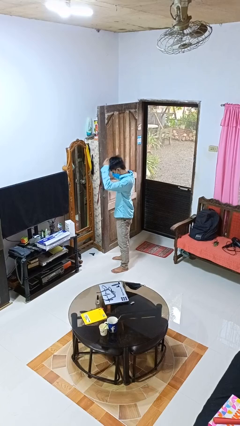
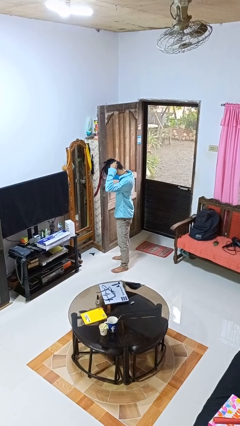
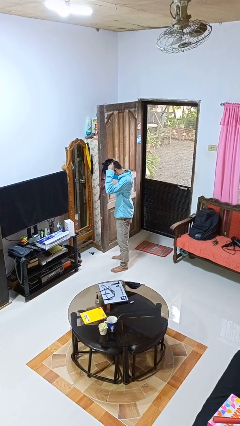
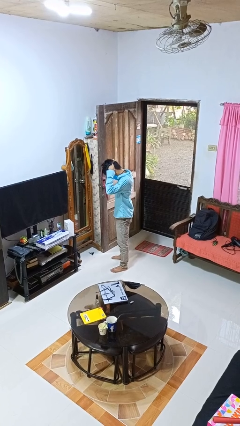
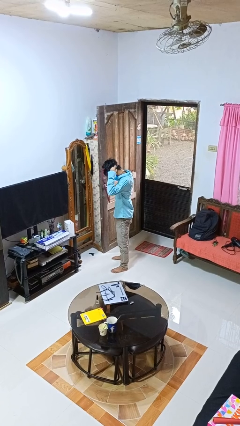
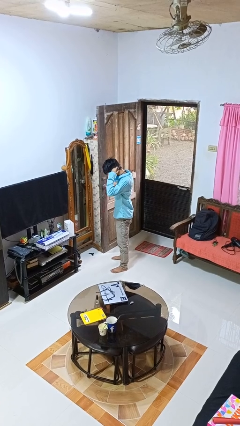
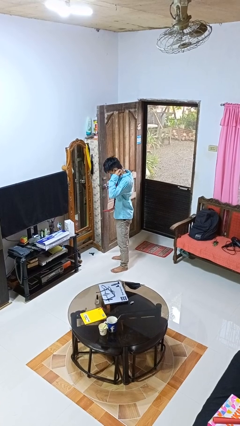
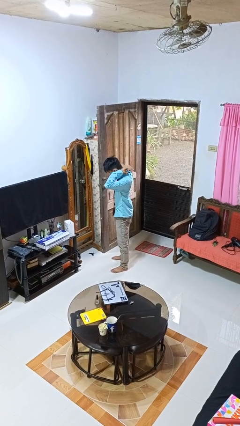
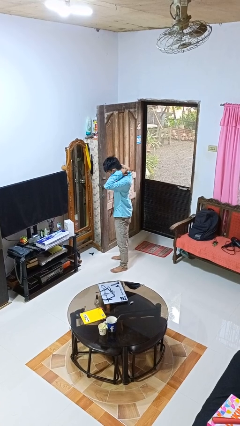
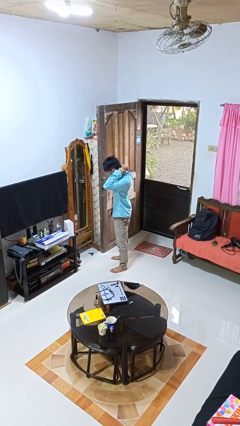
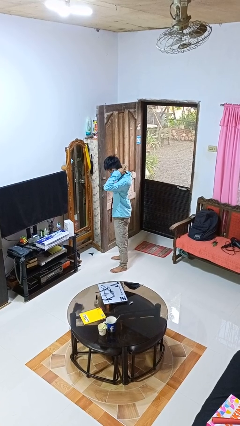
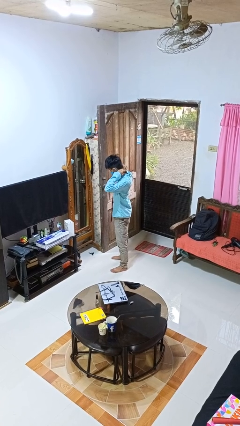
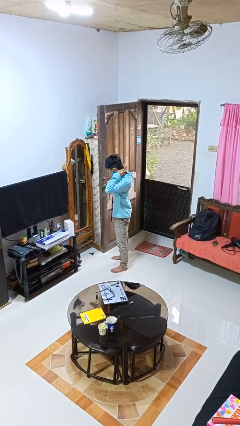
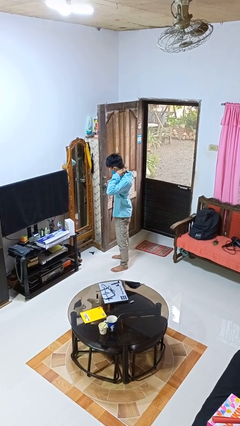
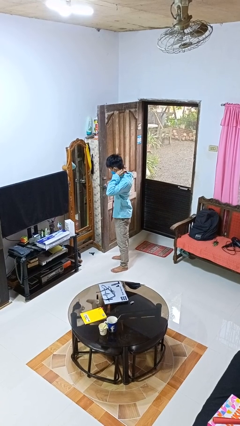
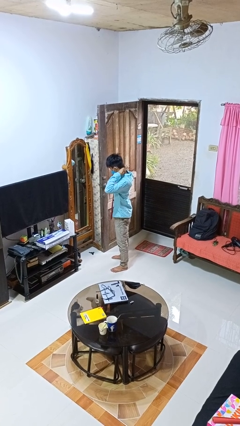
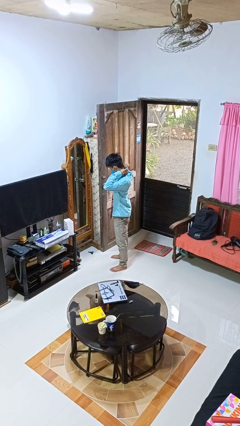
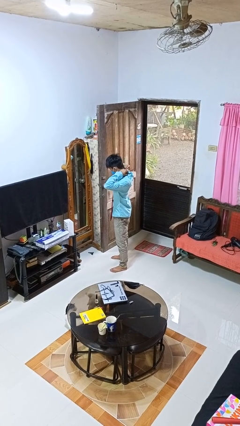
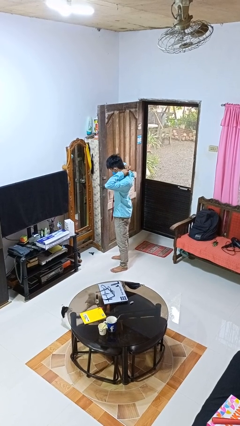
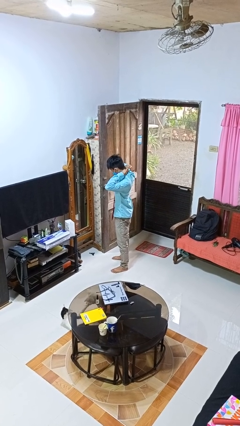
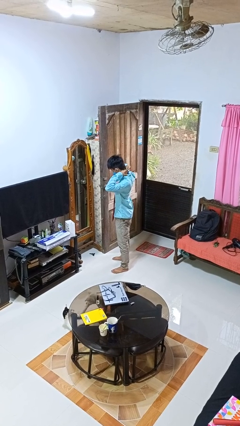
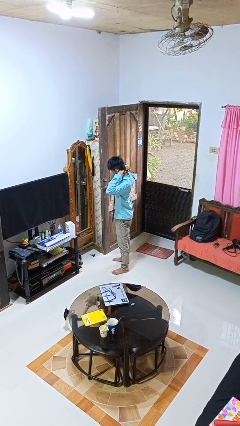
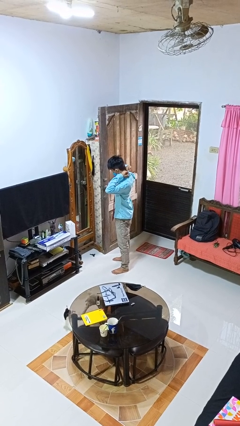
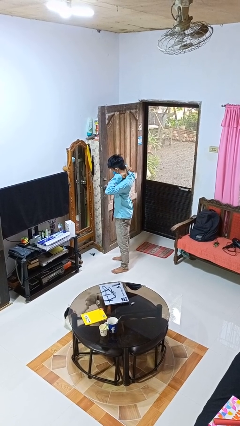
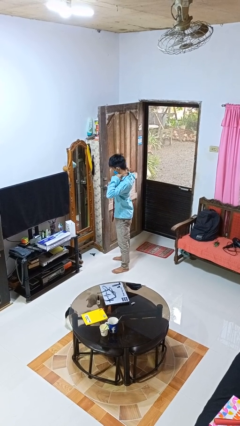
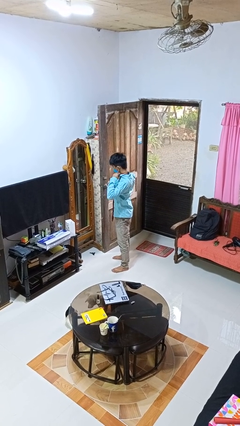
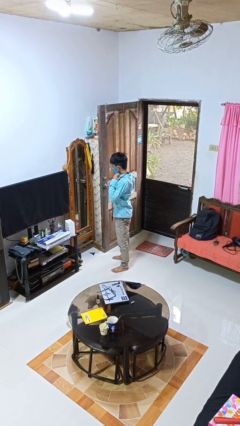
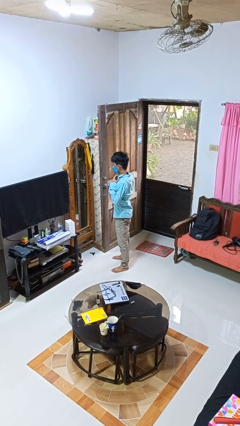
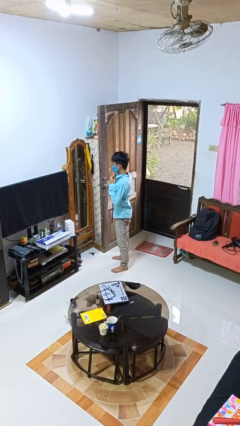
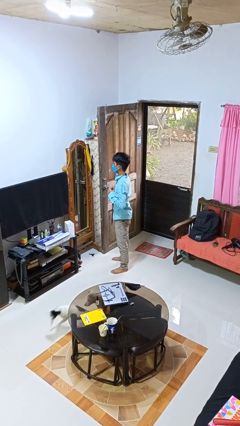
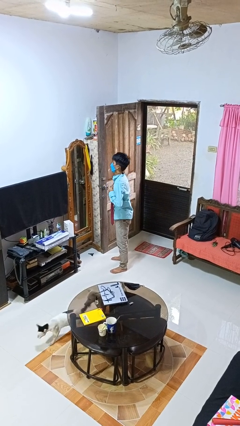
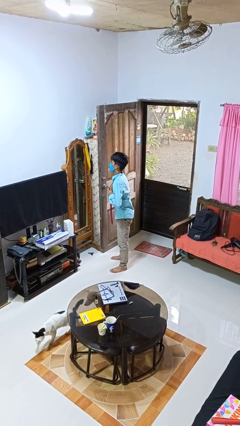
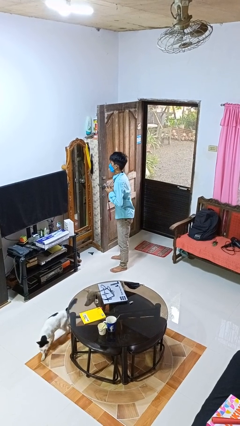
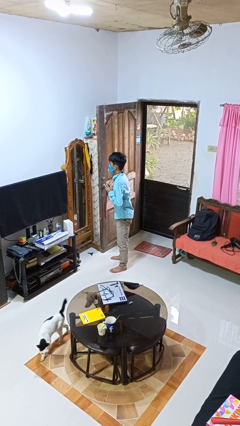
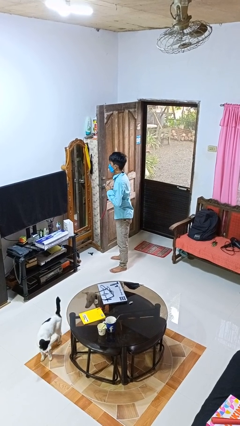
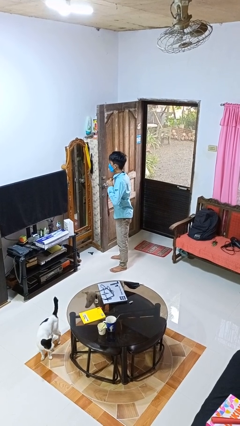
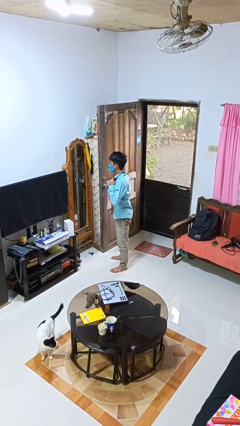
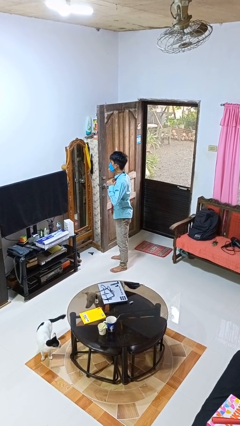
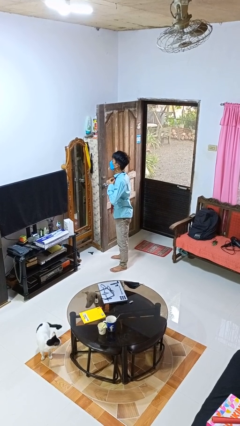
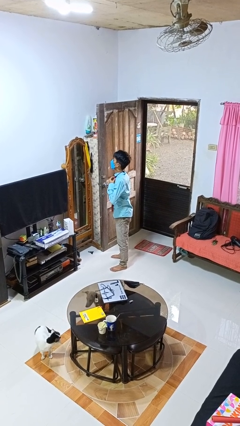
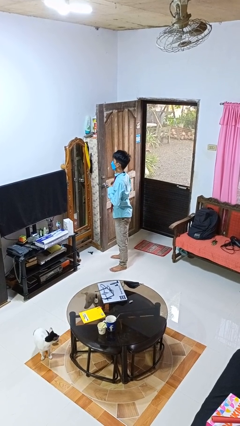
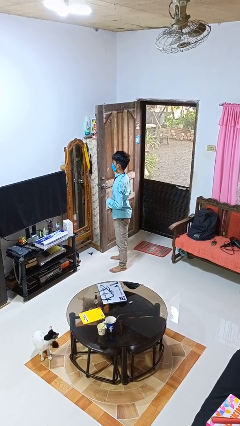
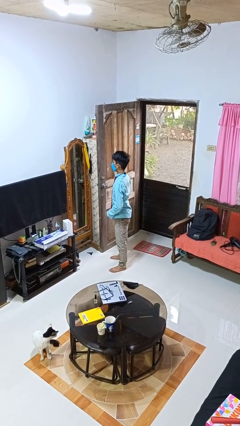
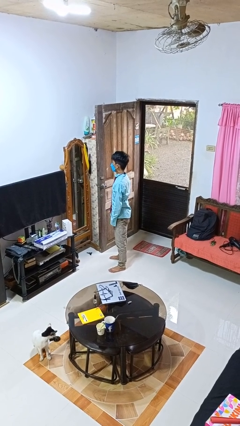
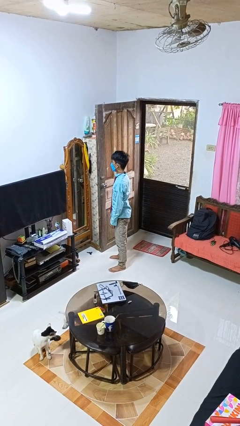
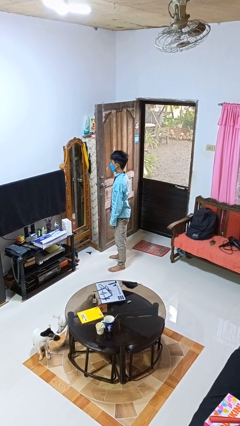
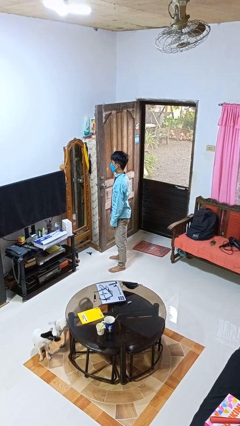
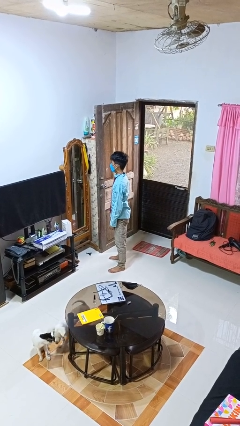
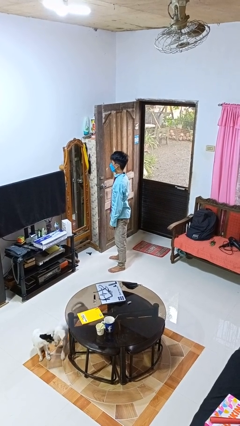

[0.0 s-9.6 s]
person puts on necktie

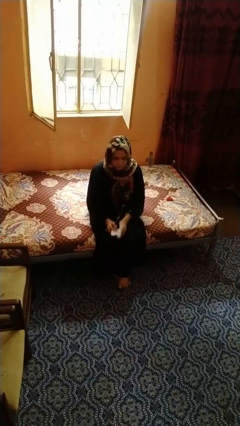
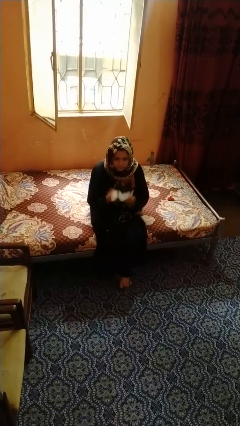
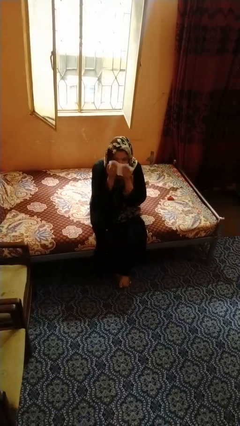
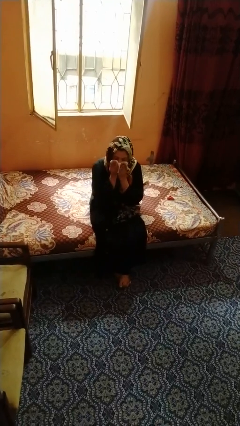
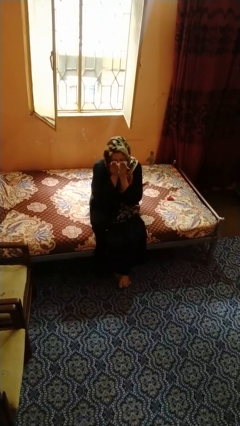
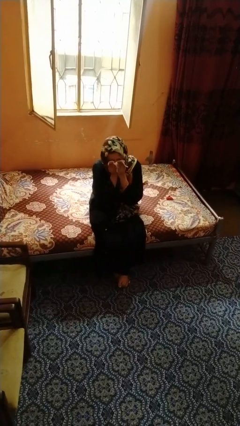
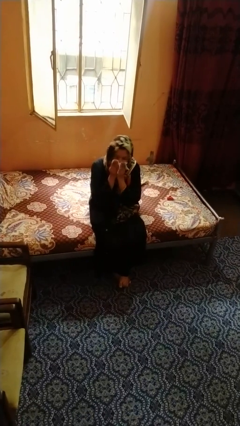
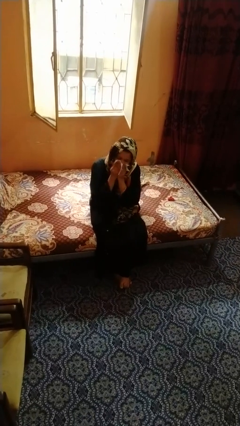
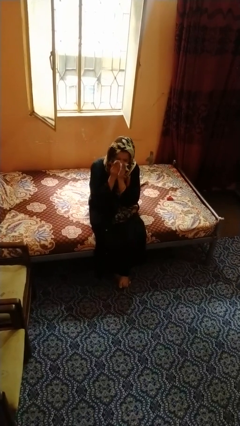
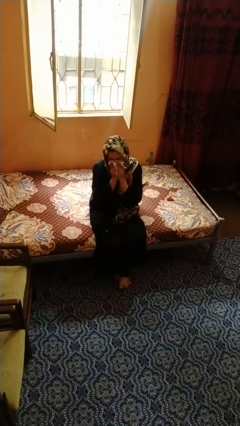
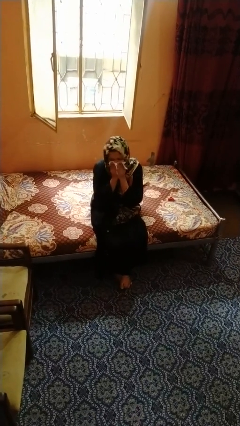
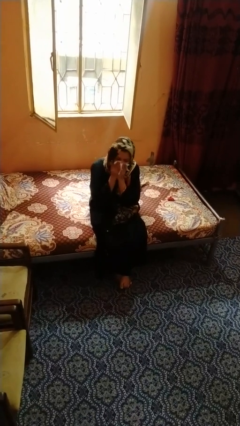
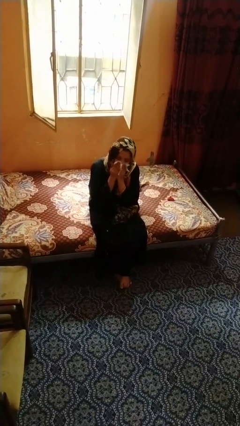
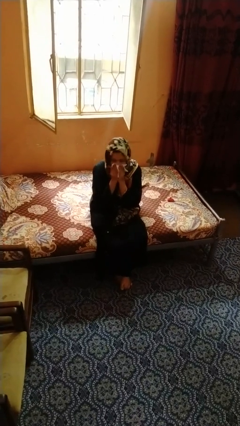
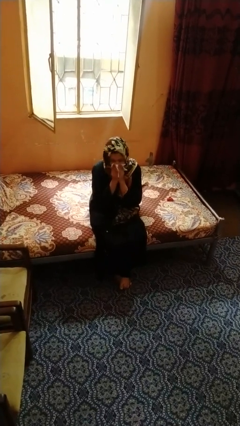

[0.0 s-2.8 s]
person blows nose

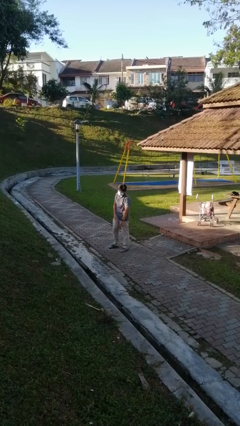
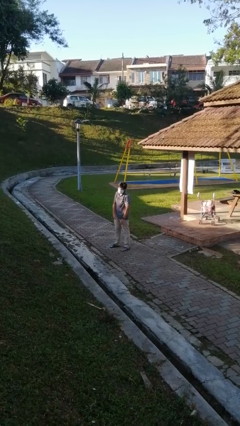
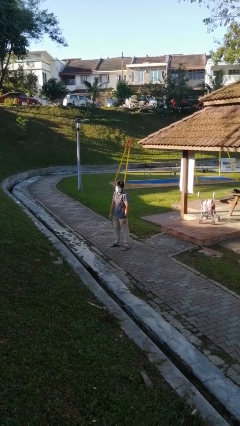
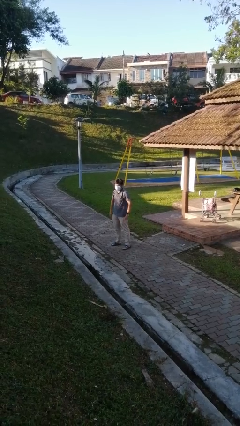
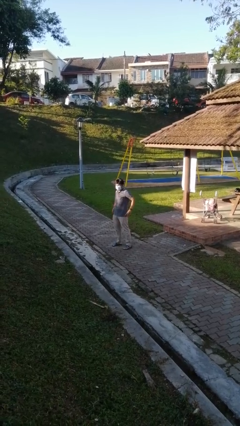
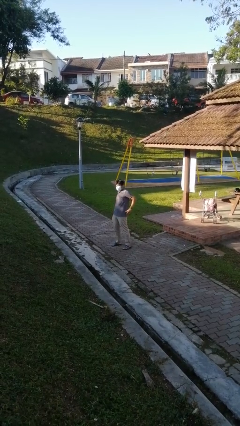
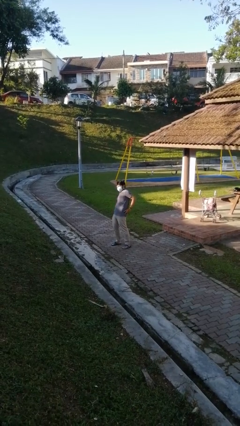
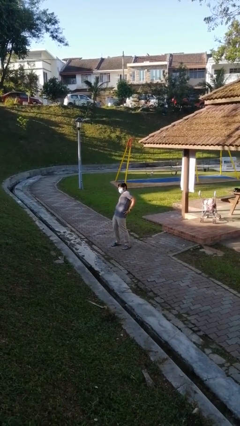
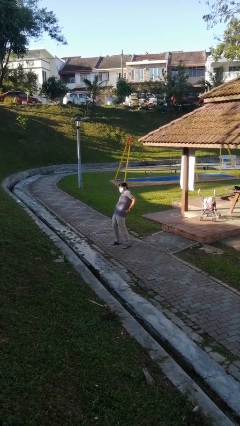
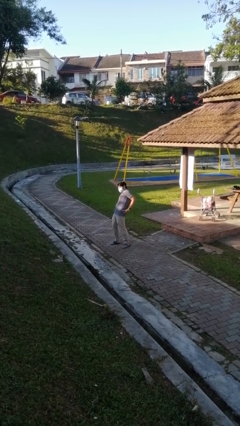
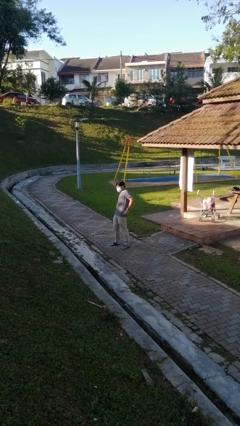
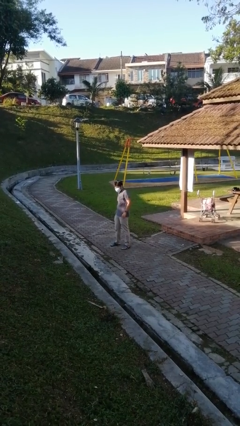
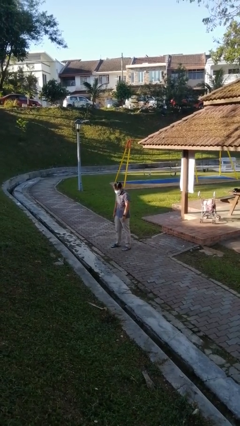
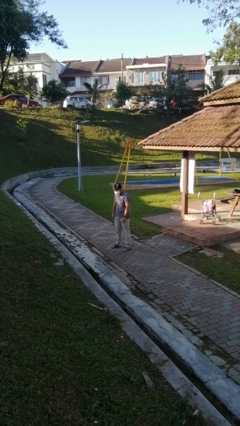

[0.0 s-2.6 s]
person stretches back

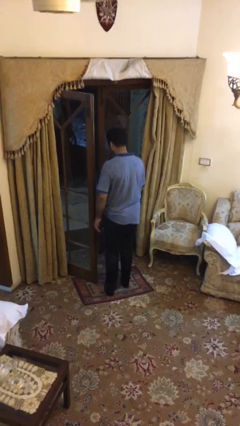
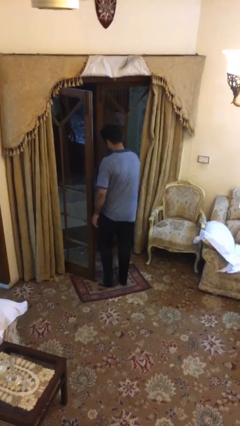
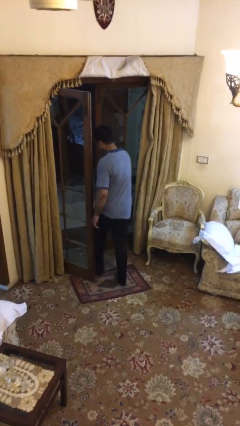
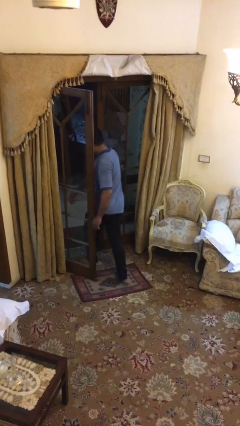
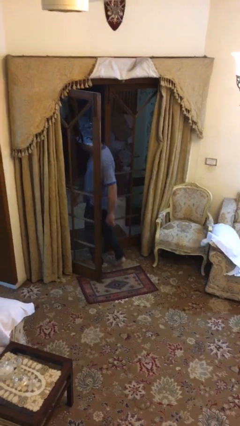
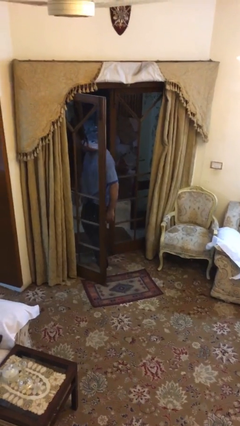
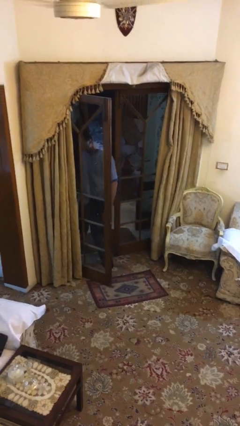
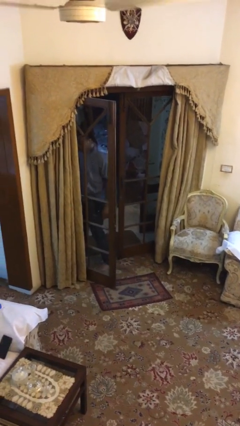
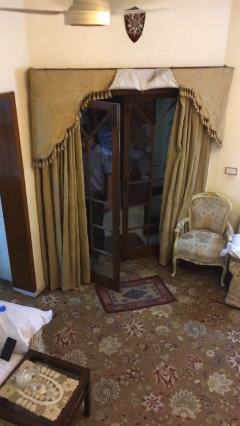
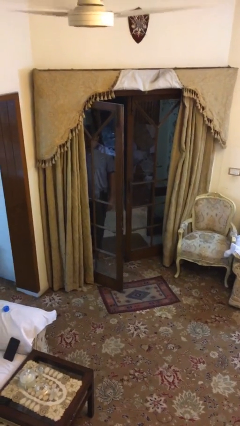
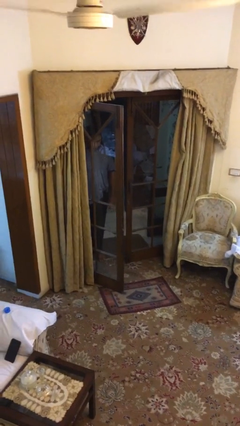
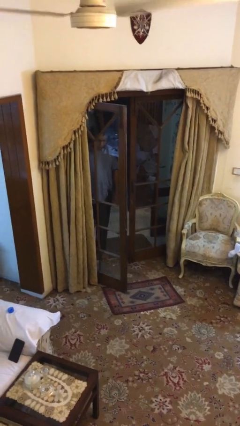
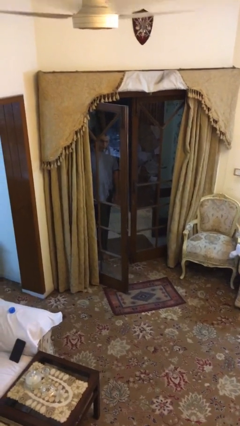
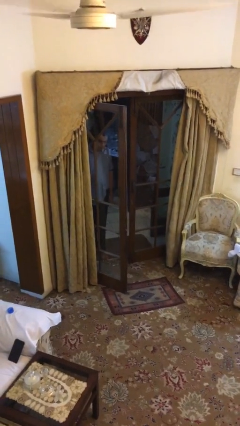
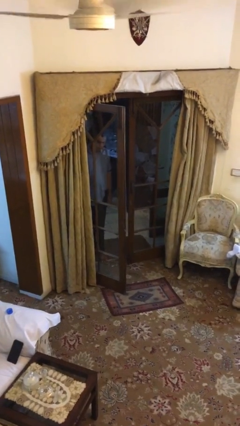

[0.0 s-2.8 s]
person exits scene through structure
